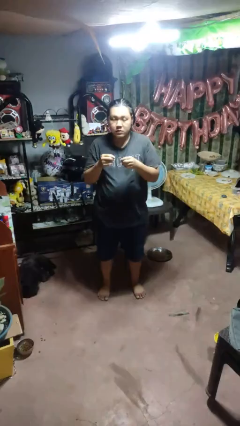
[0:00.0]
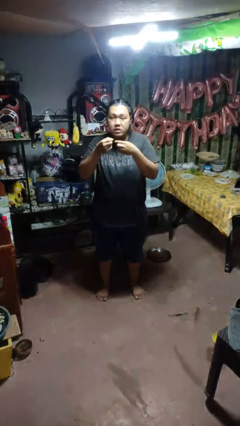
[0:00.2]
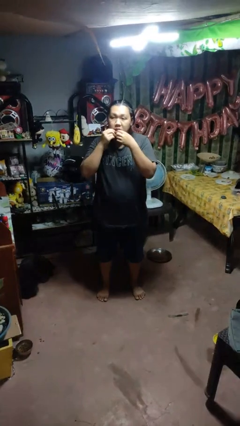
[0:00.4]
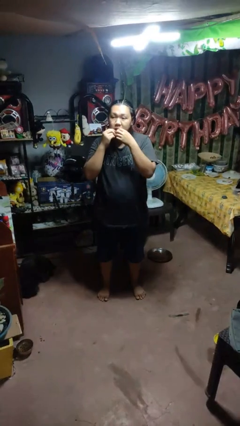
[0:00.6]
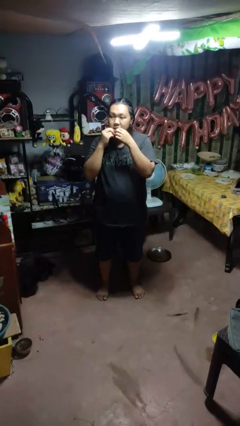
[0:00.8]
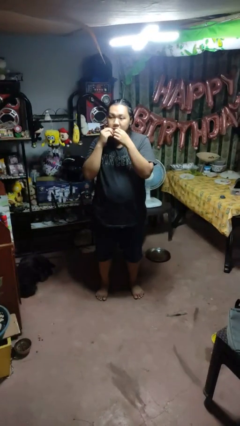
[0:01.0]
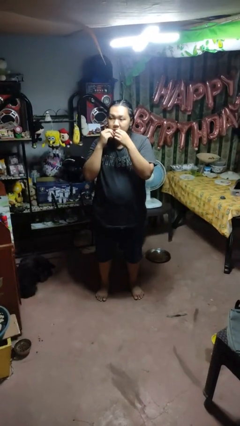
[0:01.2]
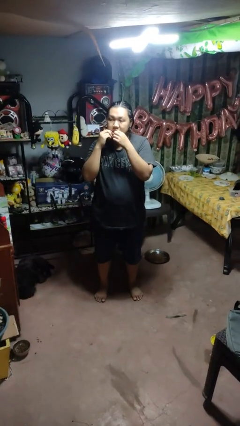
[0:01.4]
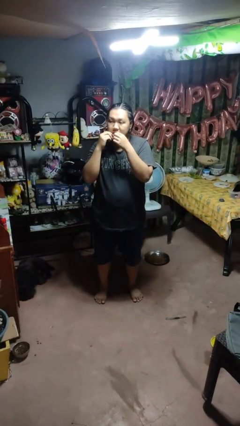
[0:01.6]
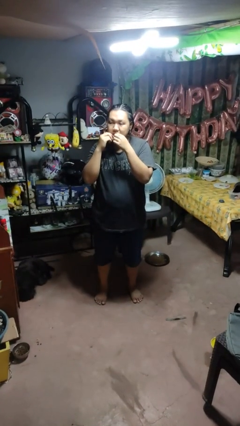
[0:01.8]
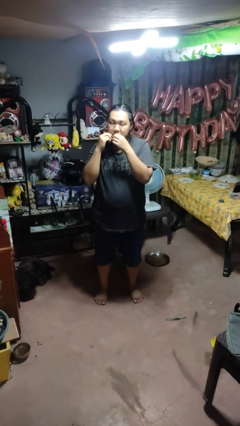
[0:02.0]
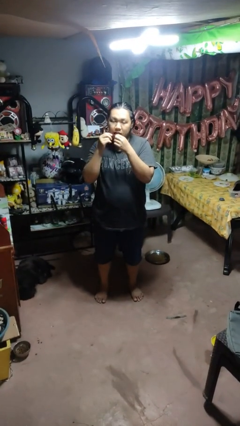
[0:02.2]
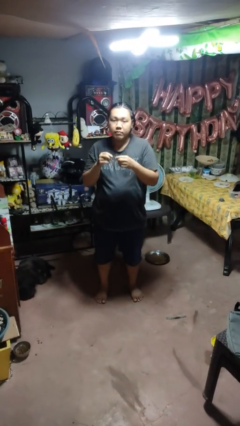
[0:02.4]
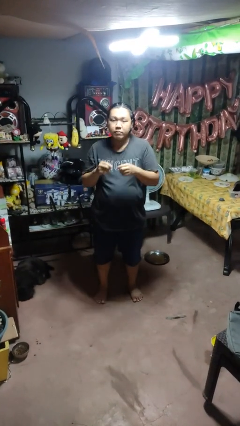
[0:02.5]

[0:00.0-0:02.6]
person flosses

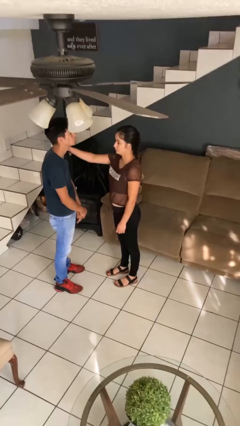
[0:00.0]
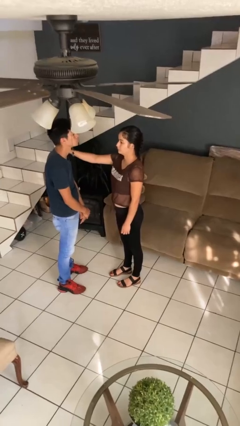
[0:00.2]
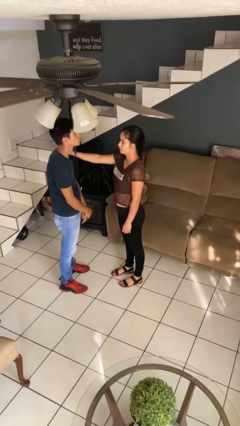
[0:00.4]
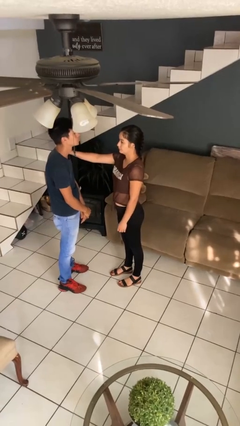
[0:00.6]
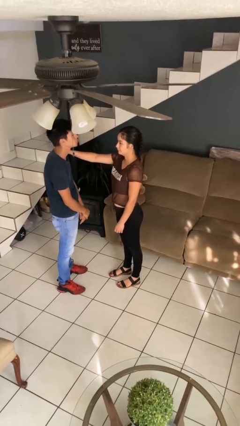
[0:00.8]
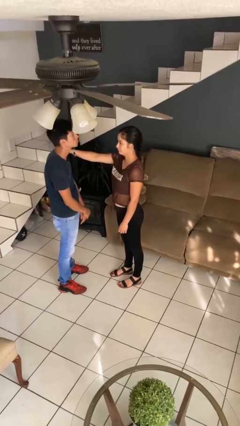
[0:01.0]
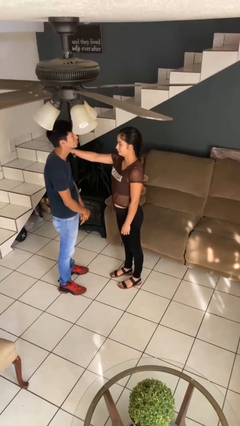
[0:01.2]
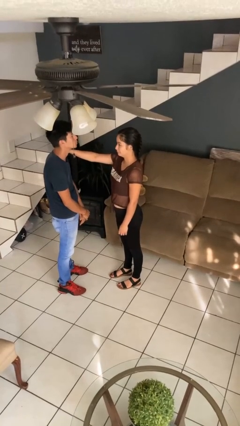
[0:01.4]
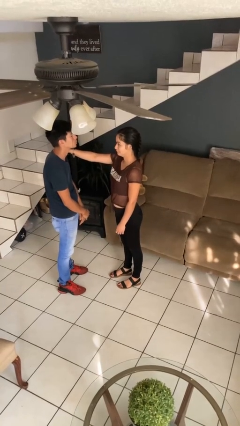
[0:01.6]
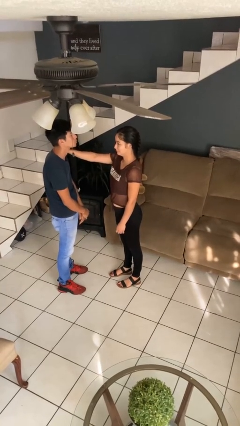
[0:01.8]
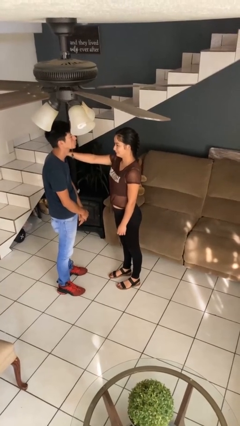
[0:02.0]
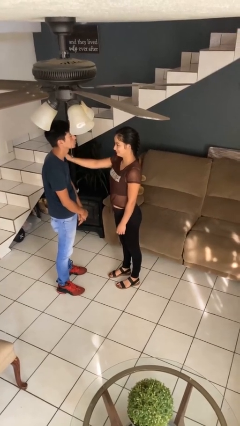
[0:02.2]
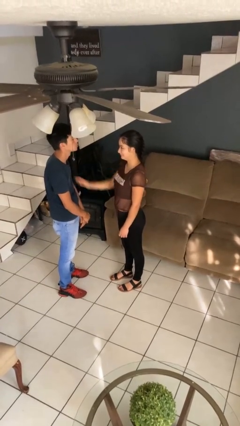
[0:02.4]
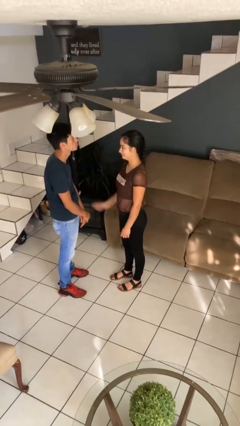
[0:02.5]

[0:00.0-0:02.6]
person pounds shoulders of person

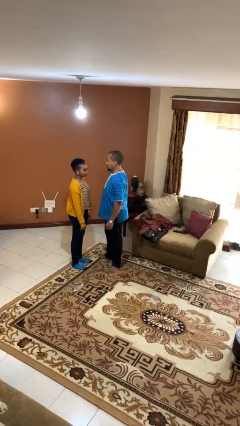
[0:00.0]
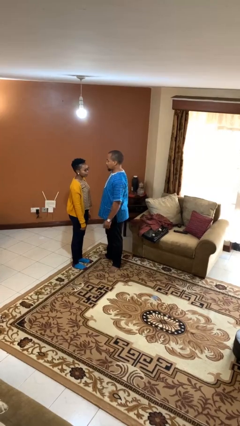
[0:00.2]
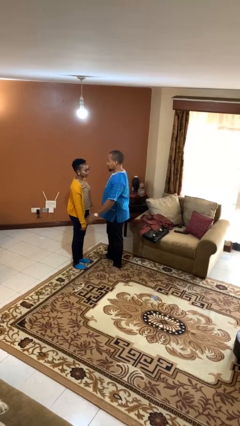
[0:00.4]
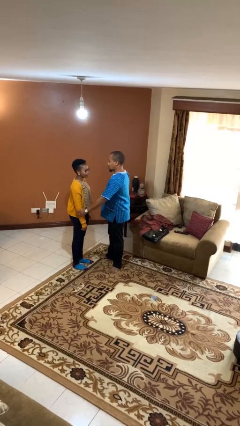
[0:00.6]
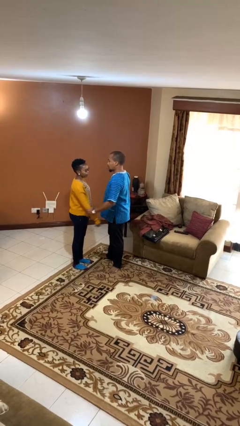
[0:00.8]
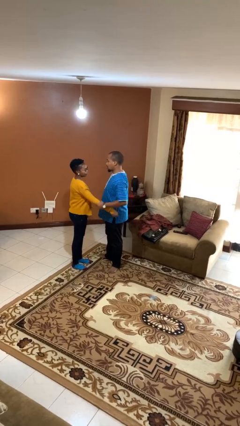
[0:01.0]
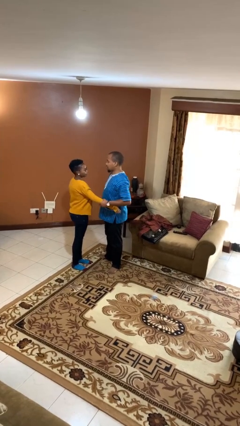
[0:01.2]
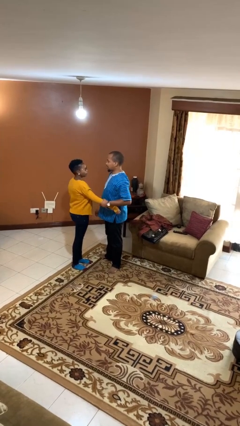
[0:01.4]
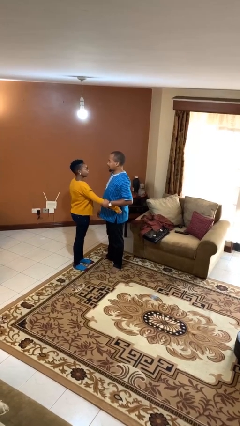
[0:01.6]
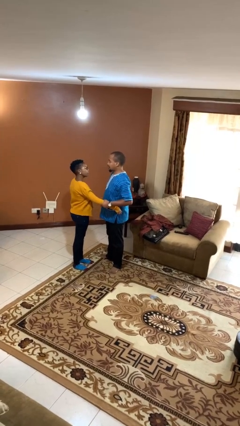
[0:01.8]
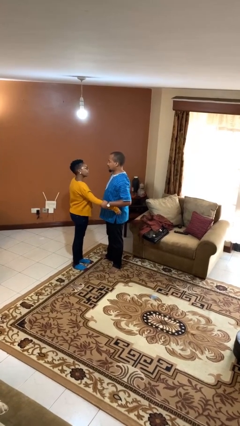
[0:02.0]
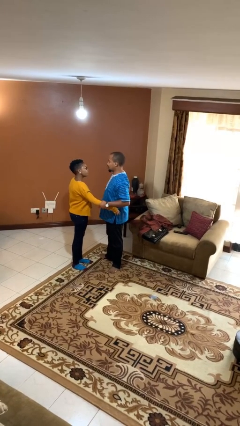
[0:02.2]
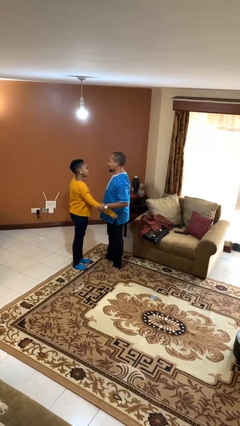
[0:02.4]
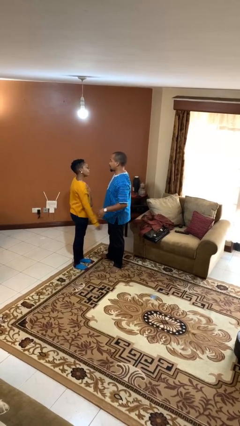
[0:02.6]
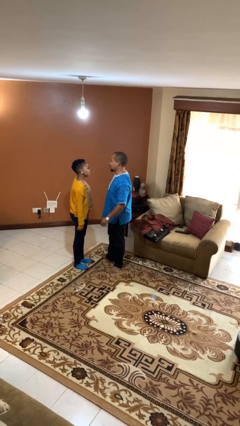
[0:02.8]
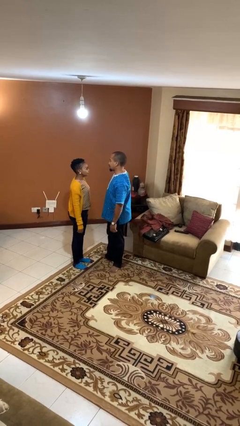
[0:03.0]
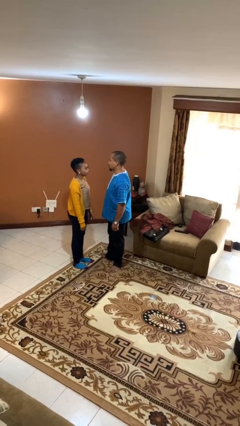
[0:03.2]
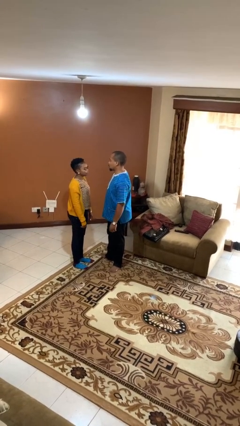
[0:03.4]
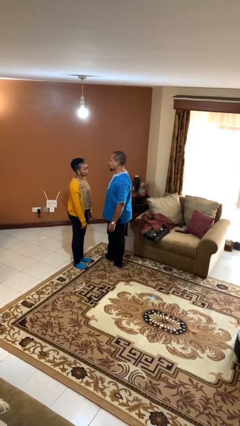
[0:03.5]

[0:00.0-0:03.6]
person grabs person by forearm

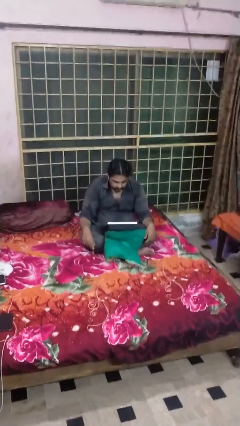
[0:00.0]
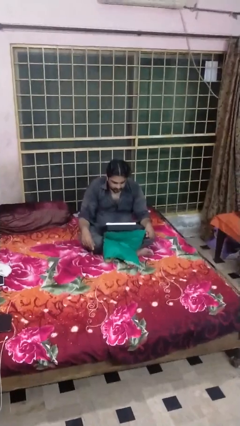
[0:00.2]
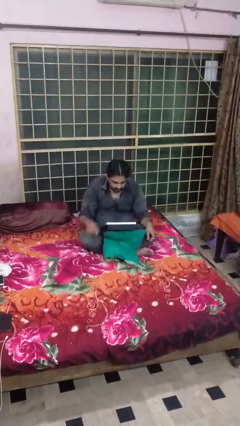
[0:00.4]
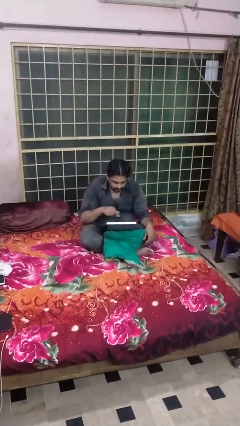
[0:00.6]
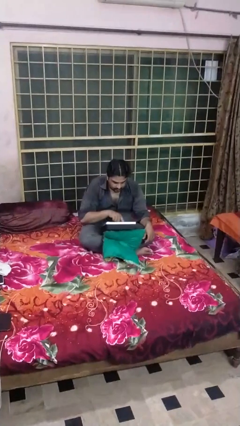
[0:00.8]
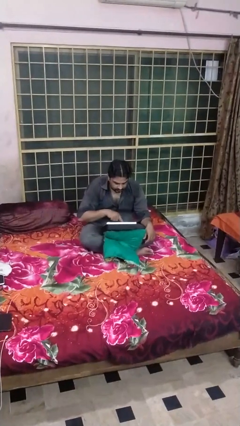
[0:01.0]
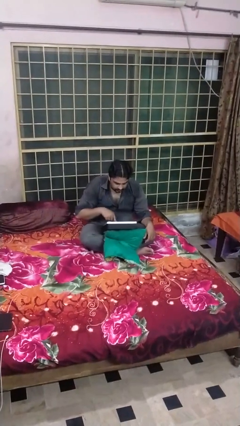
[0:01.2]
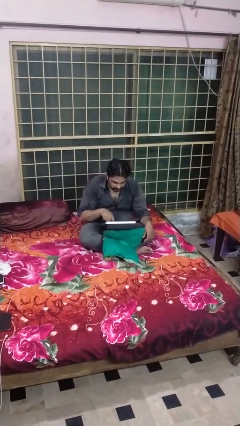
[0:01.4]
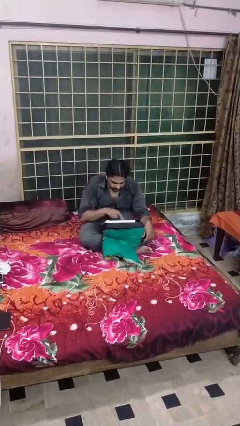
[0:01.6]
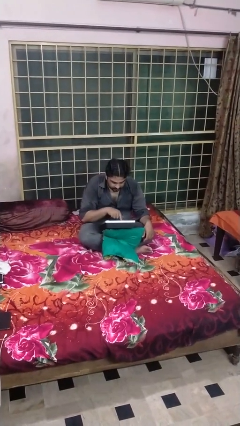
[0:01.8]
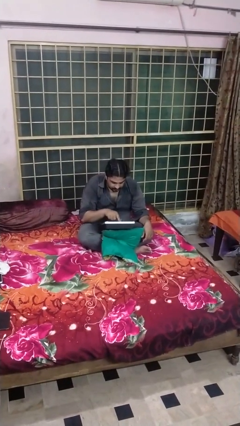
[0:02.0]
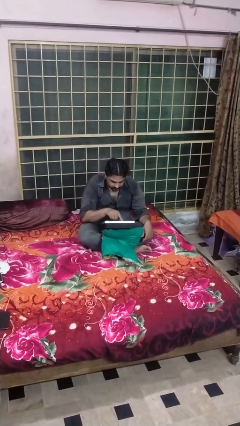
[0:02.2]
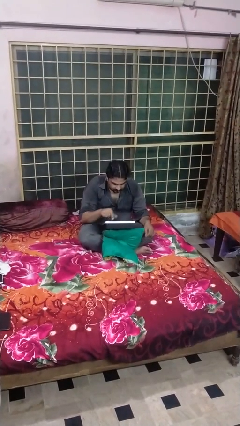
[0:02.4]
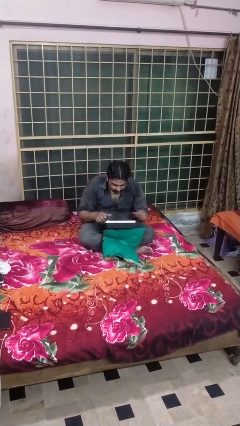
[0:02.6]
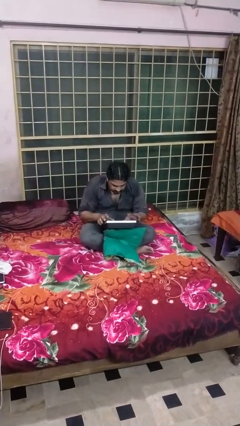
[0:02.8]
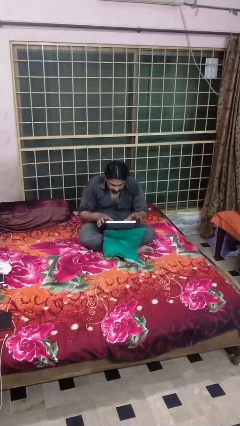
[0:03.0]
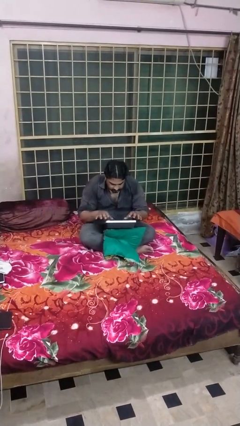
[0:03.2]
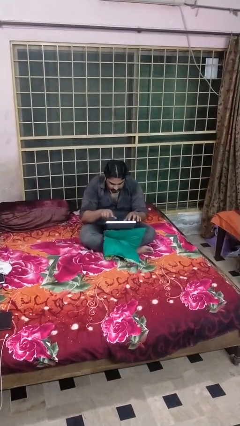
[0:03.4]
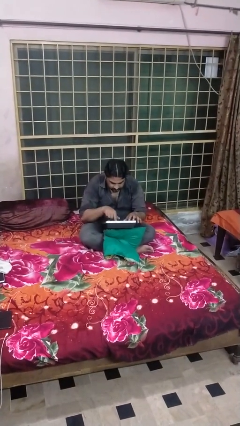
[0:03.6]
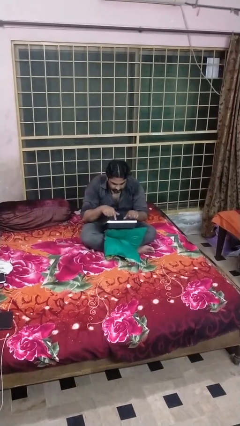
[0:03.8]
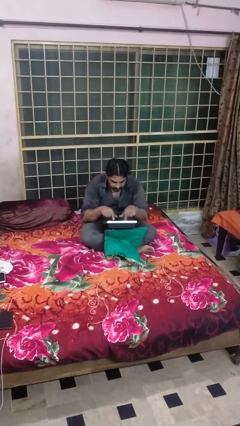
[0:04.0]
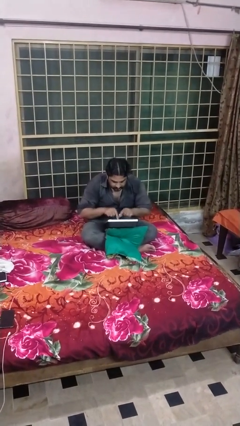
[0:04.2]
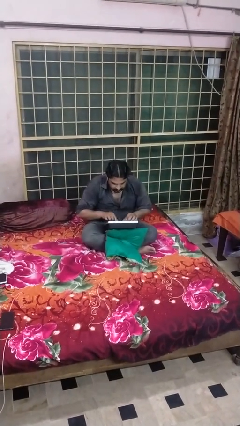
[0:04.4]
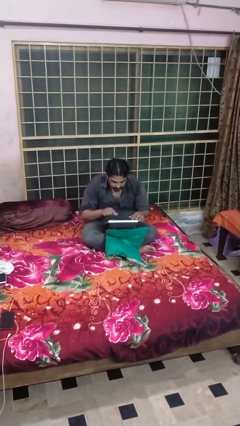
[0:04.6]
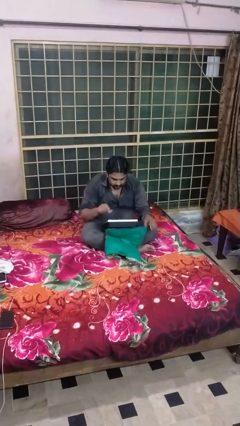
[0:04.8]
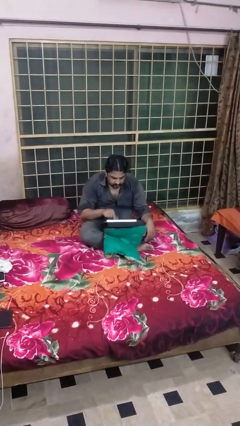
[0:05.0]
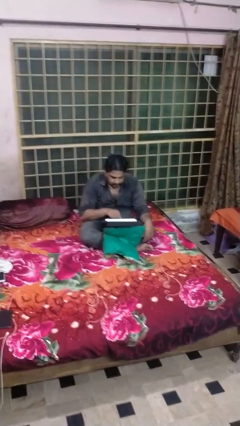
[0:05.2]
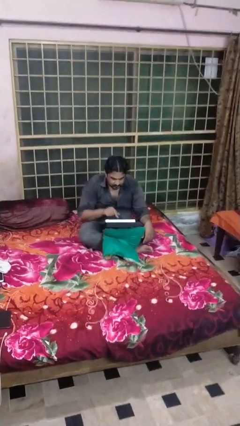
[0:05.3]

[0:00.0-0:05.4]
person interacts with tablet

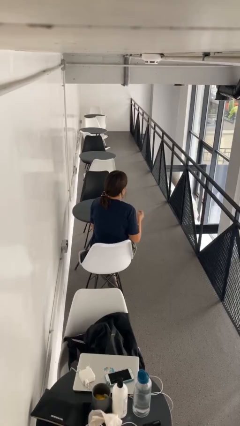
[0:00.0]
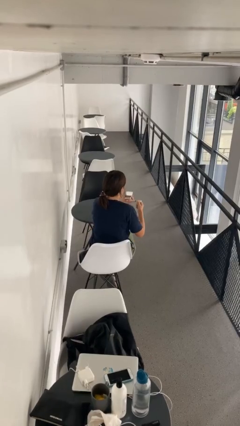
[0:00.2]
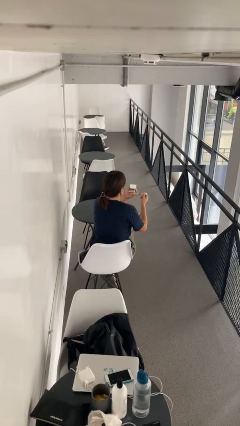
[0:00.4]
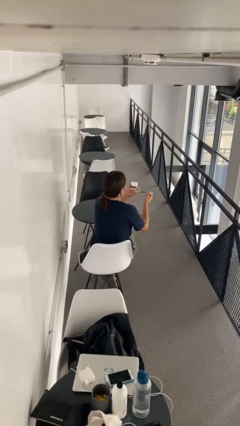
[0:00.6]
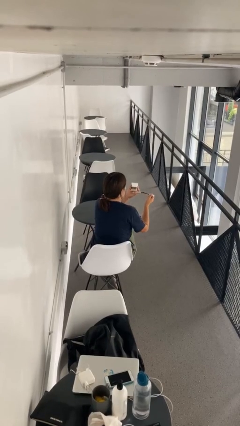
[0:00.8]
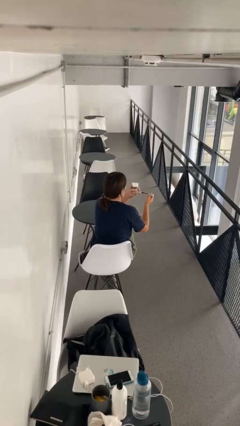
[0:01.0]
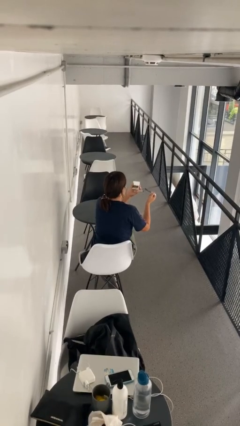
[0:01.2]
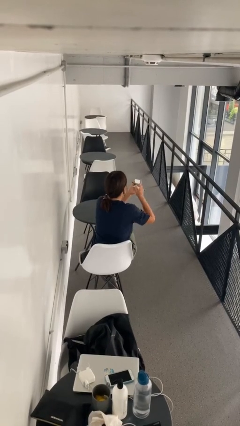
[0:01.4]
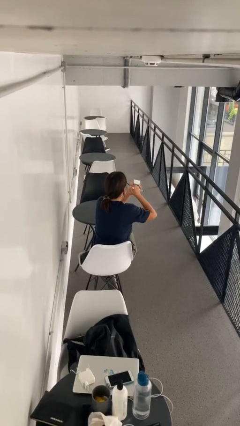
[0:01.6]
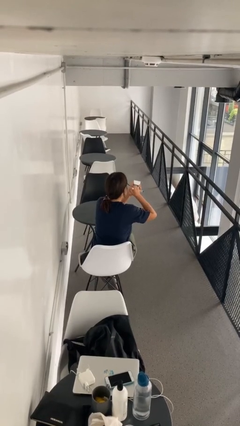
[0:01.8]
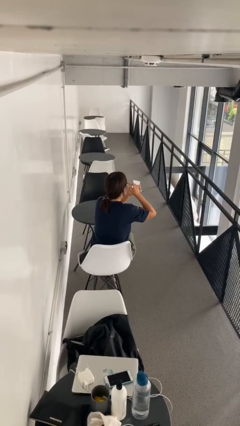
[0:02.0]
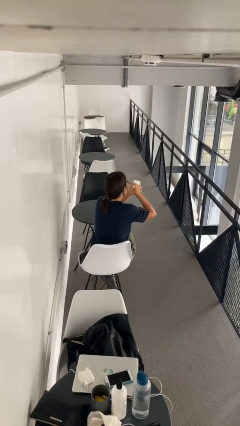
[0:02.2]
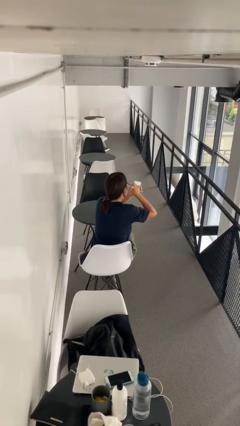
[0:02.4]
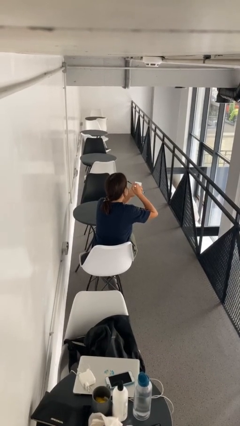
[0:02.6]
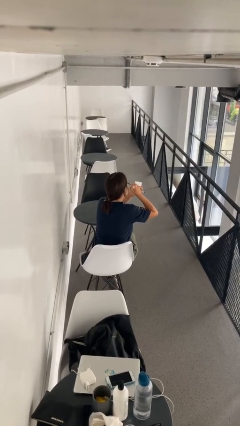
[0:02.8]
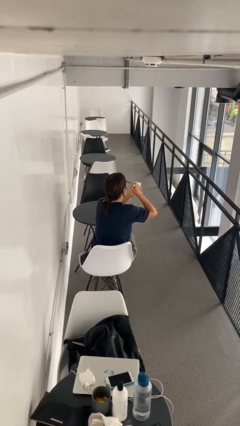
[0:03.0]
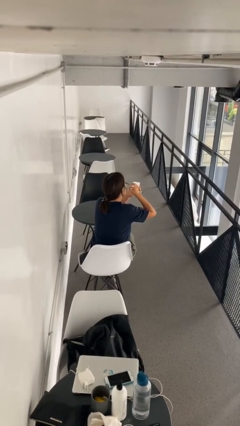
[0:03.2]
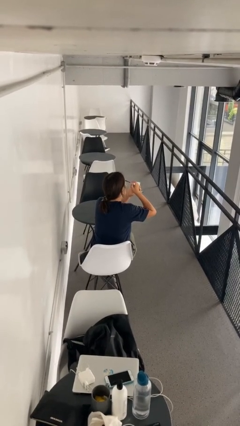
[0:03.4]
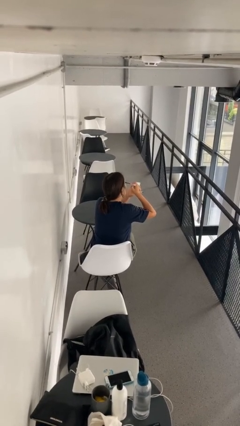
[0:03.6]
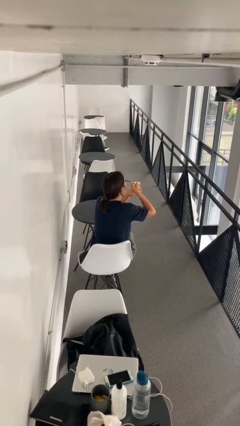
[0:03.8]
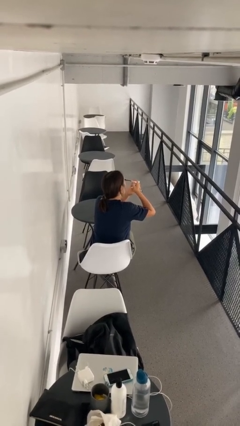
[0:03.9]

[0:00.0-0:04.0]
person applies eye makeup
